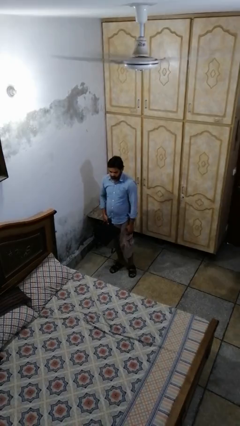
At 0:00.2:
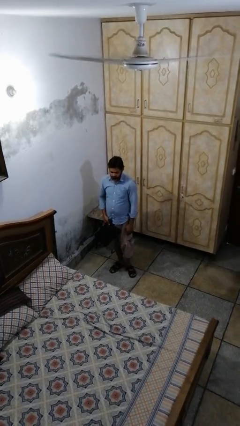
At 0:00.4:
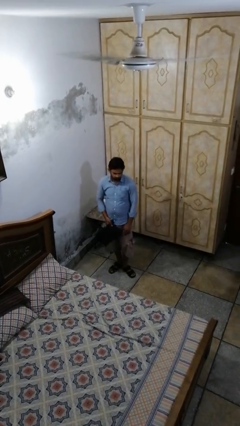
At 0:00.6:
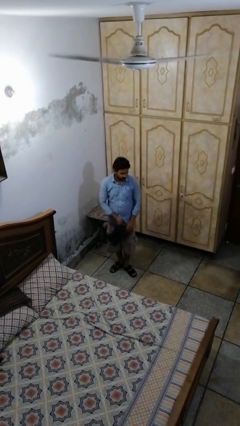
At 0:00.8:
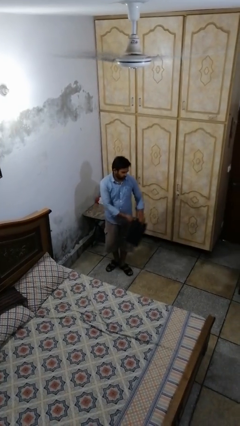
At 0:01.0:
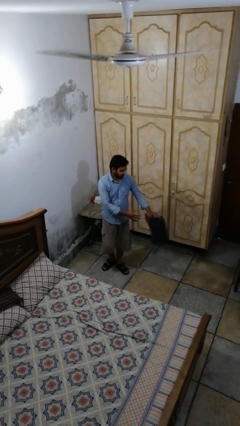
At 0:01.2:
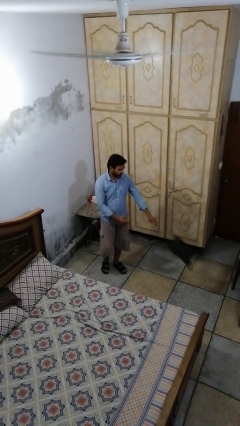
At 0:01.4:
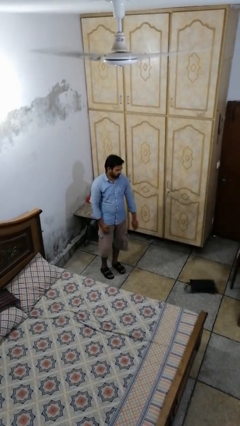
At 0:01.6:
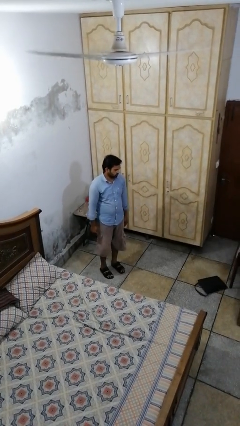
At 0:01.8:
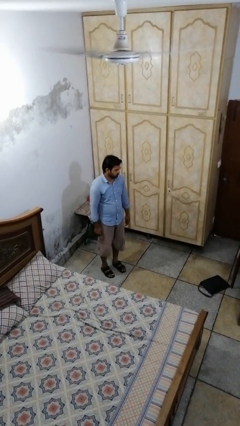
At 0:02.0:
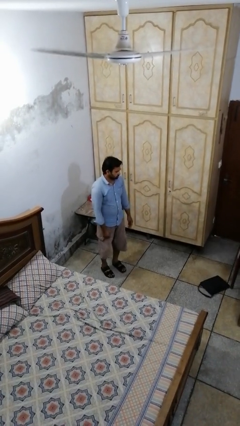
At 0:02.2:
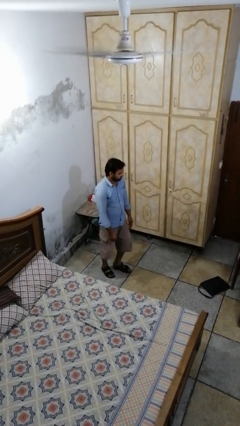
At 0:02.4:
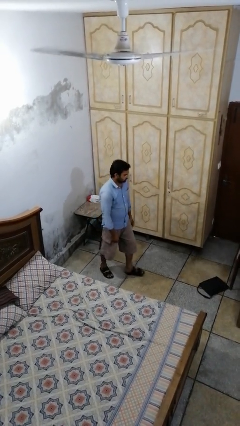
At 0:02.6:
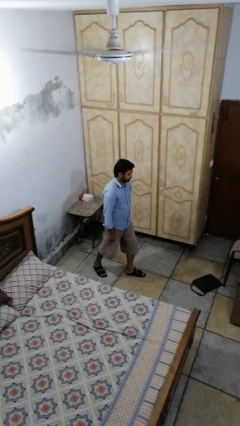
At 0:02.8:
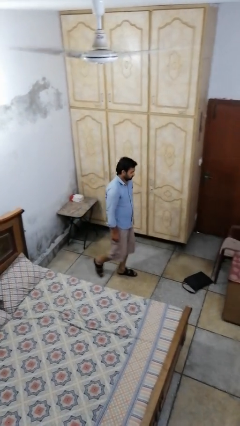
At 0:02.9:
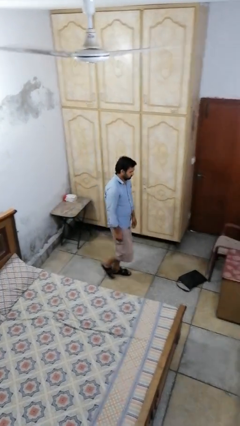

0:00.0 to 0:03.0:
person throws object to ground

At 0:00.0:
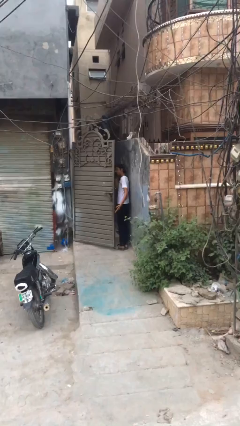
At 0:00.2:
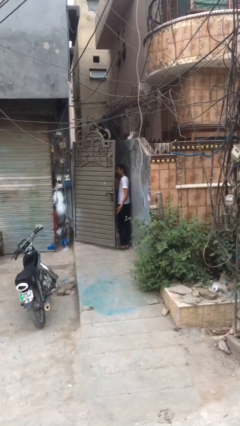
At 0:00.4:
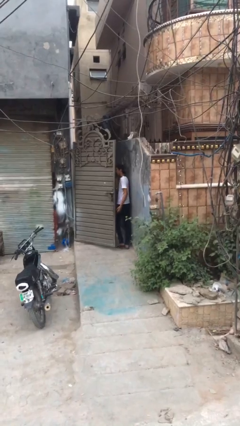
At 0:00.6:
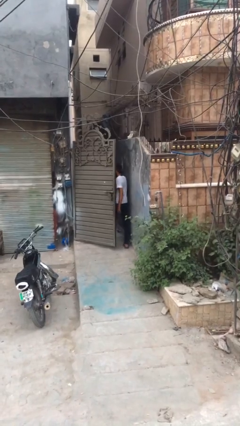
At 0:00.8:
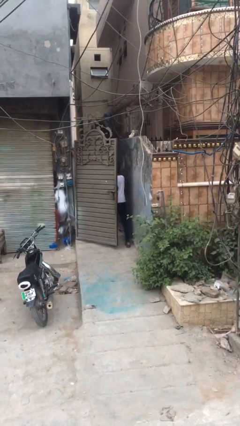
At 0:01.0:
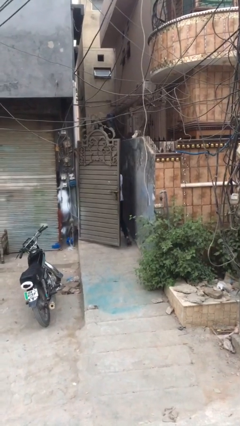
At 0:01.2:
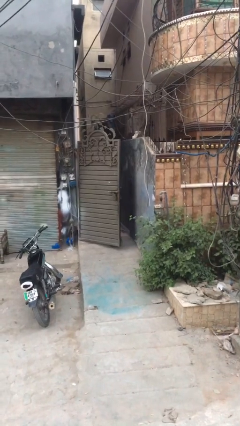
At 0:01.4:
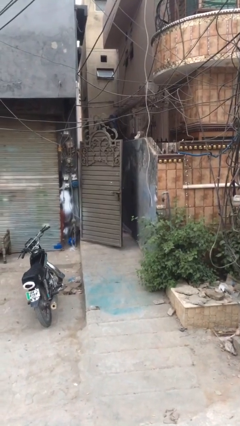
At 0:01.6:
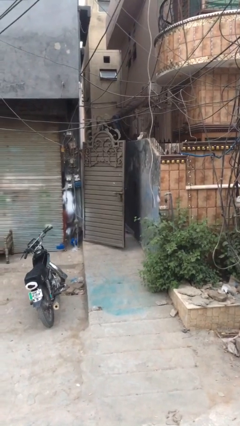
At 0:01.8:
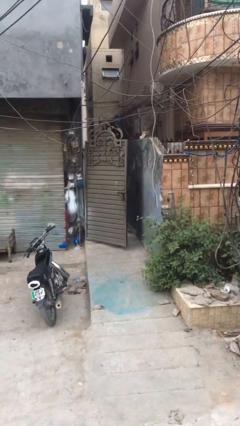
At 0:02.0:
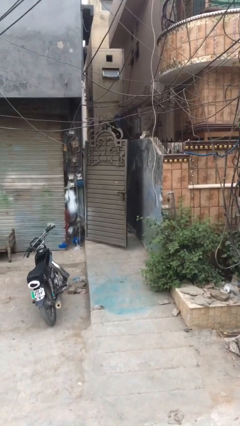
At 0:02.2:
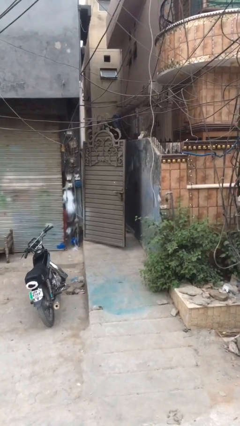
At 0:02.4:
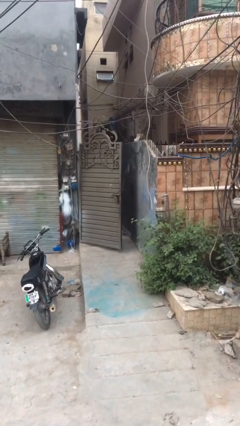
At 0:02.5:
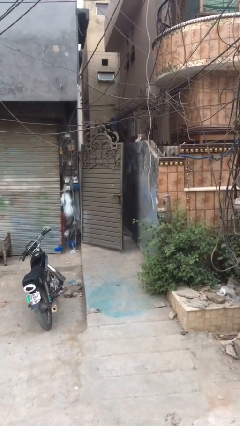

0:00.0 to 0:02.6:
person exits scene through structure

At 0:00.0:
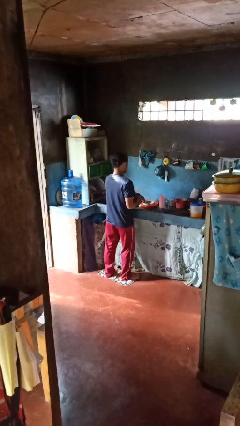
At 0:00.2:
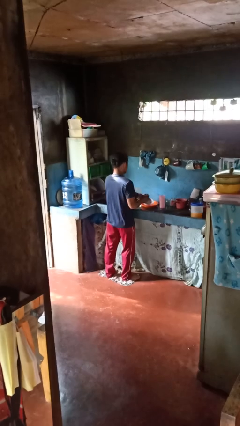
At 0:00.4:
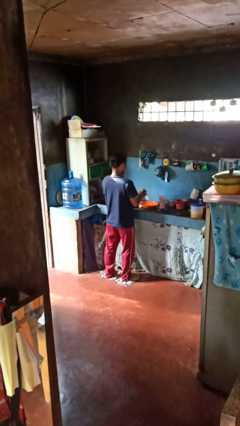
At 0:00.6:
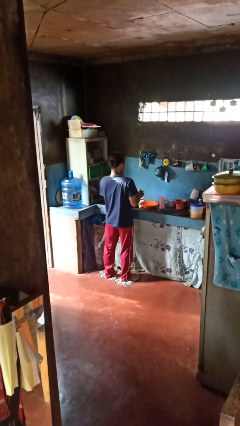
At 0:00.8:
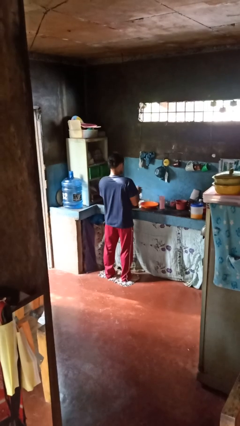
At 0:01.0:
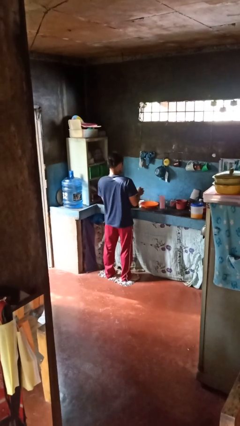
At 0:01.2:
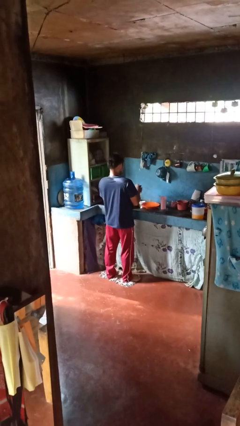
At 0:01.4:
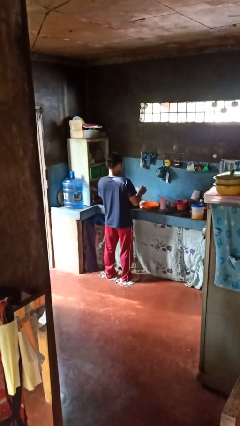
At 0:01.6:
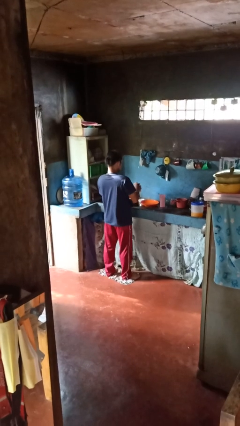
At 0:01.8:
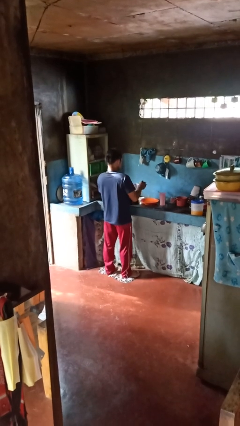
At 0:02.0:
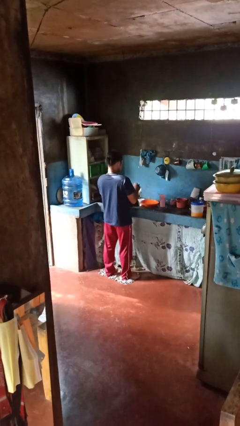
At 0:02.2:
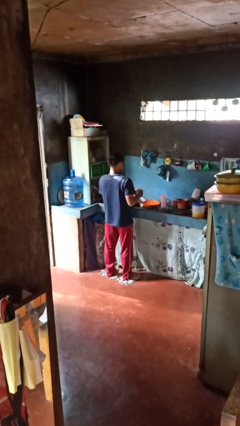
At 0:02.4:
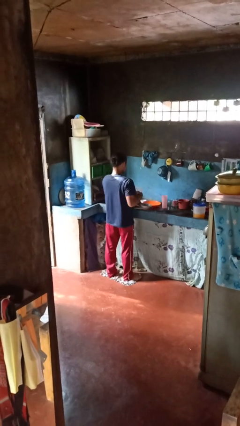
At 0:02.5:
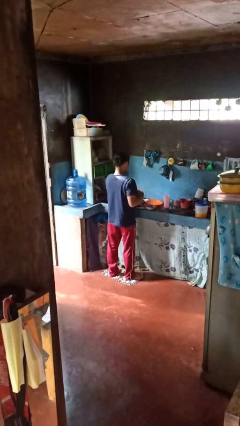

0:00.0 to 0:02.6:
person dries dish

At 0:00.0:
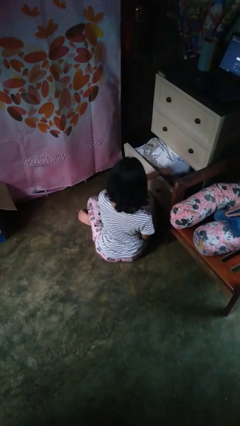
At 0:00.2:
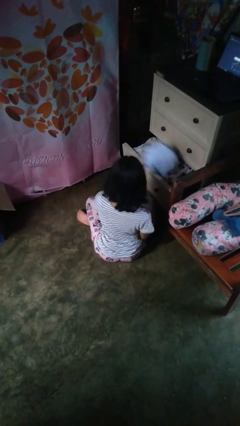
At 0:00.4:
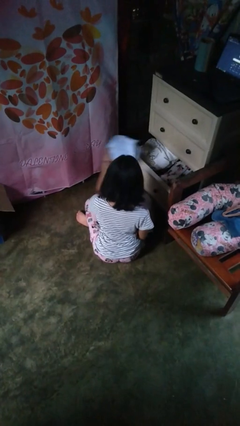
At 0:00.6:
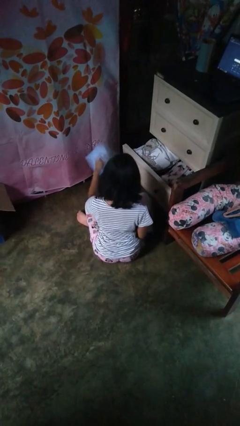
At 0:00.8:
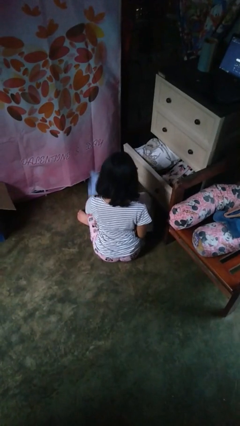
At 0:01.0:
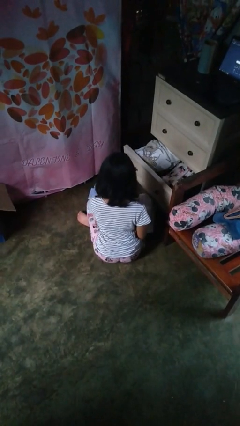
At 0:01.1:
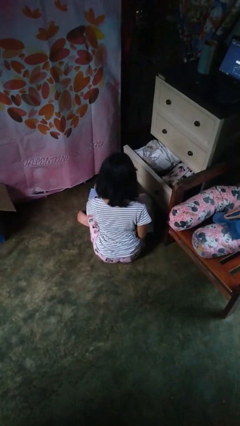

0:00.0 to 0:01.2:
person takes clothes from dresser

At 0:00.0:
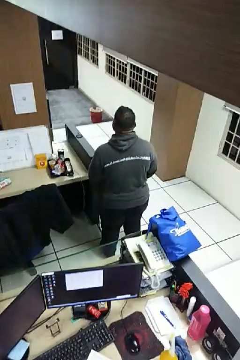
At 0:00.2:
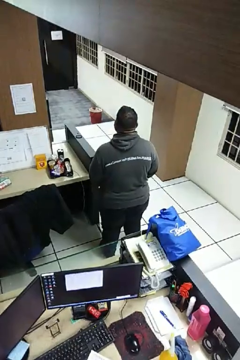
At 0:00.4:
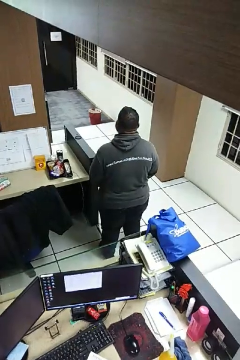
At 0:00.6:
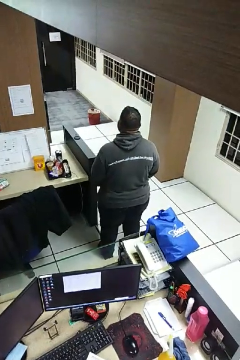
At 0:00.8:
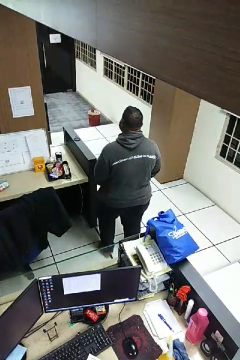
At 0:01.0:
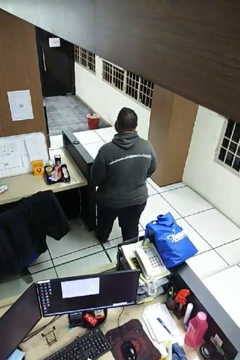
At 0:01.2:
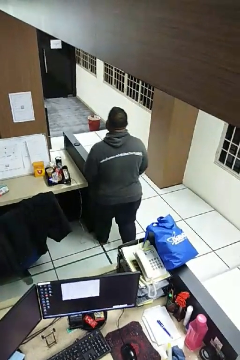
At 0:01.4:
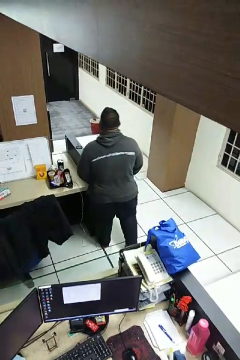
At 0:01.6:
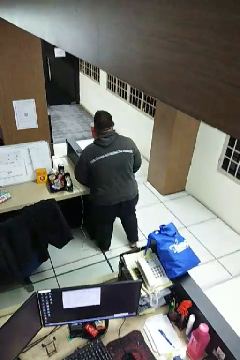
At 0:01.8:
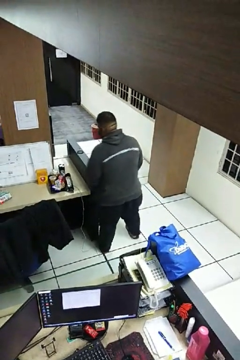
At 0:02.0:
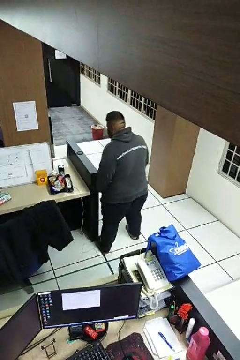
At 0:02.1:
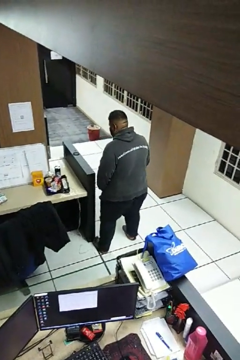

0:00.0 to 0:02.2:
person bumps into table

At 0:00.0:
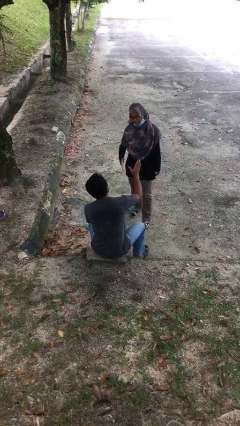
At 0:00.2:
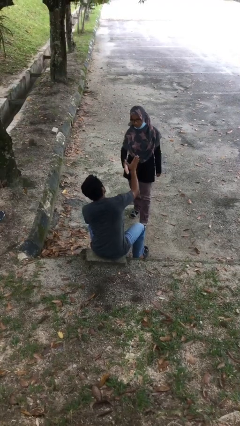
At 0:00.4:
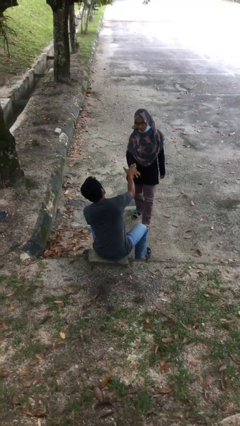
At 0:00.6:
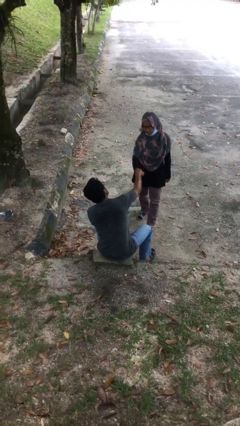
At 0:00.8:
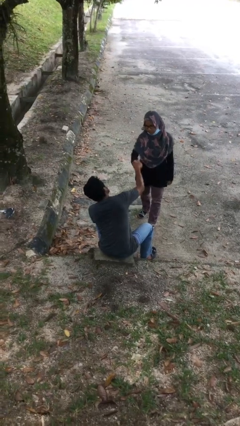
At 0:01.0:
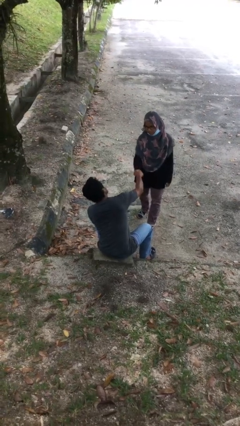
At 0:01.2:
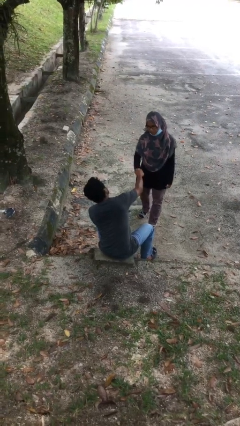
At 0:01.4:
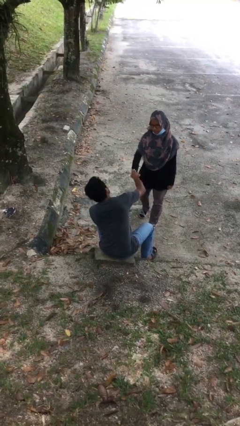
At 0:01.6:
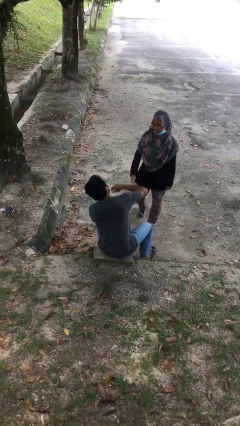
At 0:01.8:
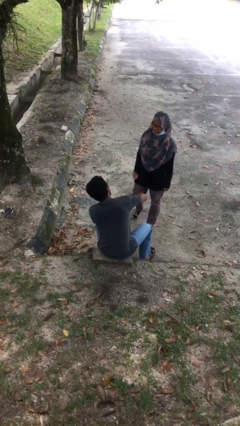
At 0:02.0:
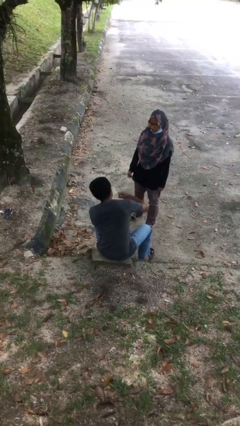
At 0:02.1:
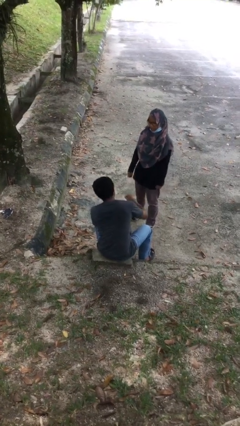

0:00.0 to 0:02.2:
person shakes hand

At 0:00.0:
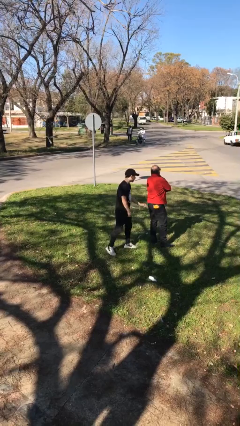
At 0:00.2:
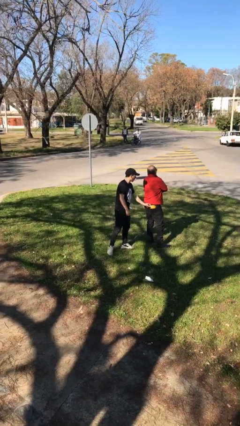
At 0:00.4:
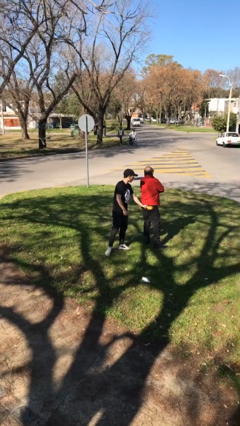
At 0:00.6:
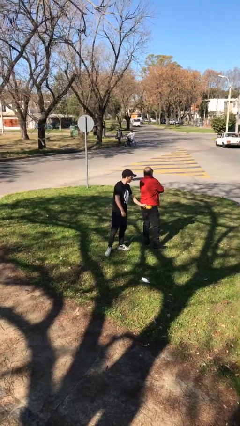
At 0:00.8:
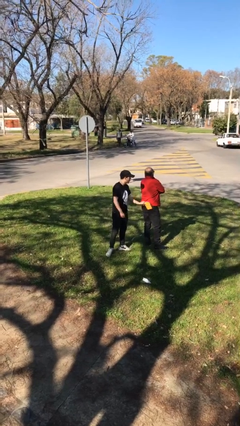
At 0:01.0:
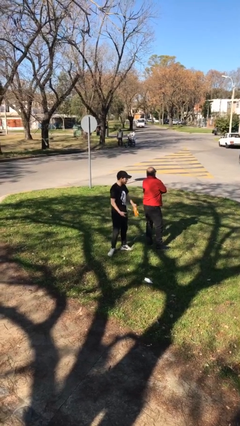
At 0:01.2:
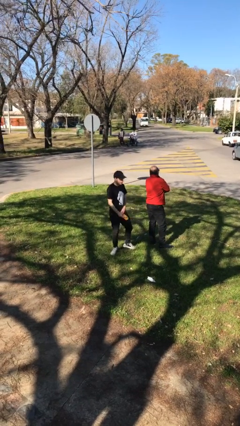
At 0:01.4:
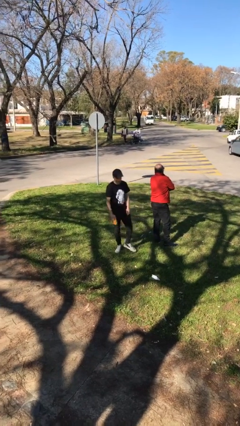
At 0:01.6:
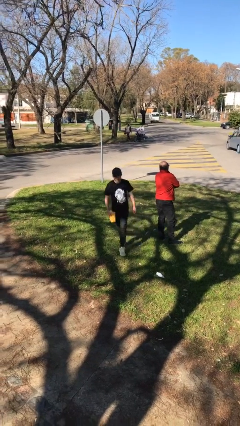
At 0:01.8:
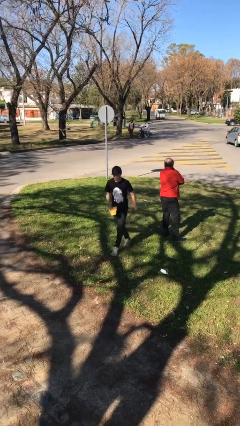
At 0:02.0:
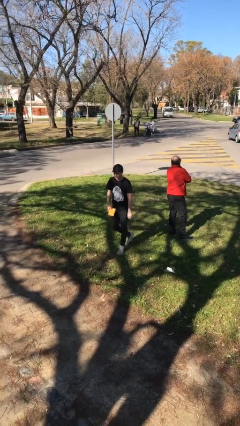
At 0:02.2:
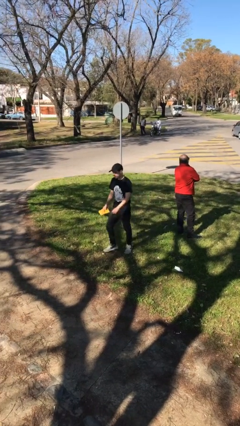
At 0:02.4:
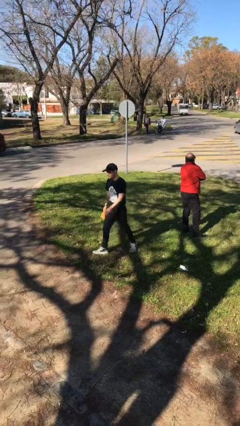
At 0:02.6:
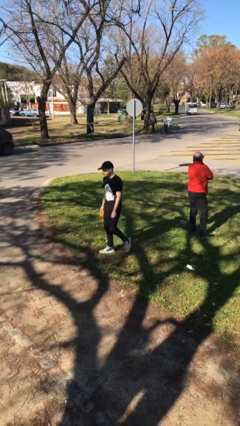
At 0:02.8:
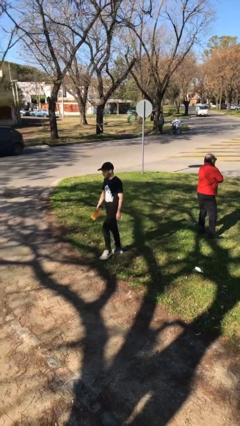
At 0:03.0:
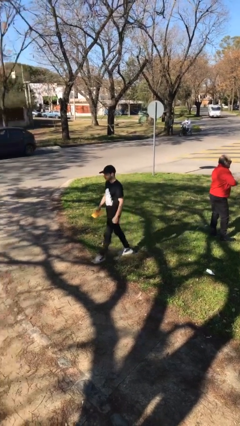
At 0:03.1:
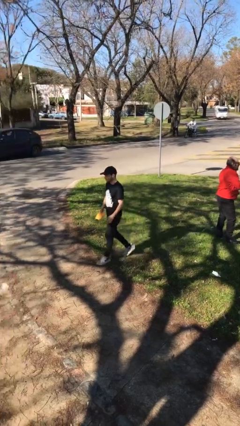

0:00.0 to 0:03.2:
person steals object from person

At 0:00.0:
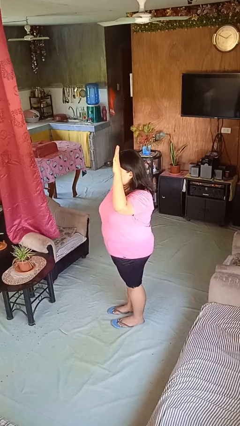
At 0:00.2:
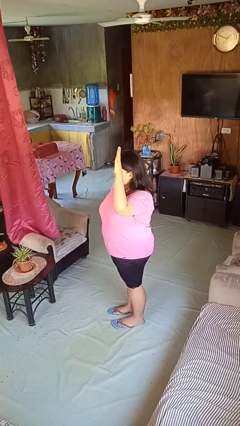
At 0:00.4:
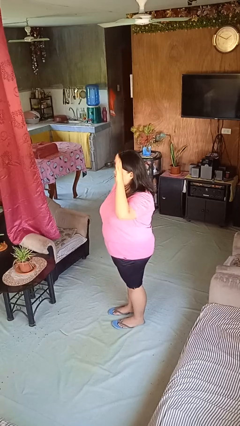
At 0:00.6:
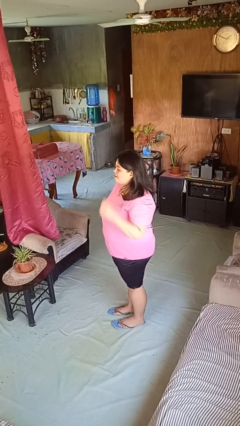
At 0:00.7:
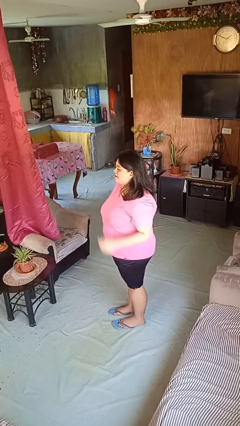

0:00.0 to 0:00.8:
person gestures lower hand
